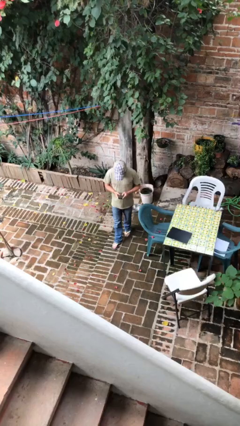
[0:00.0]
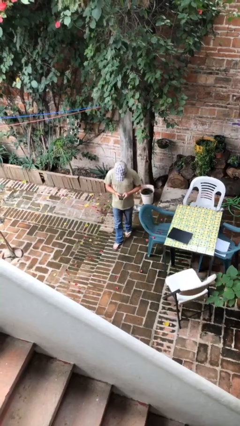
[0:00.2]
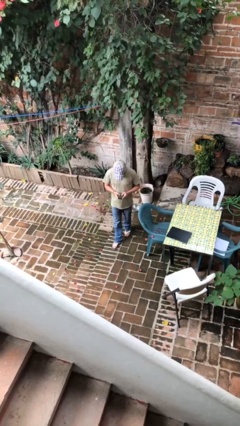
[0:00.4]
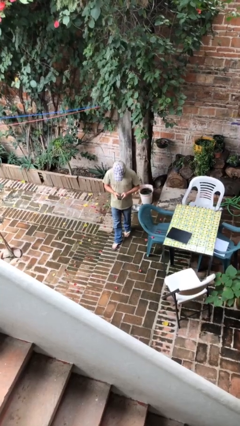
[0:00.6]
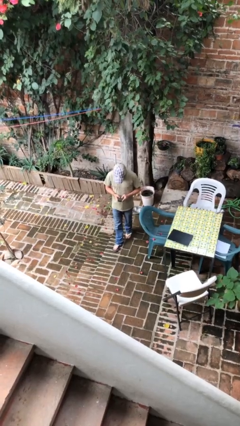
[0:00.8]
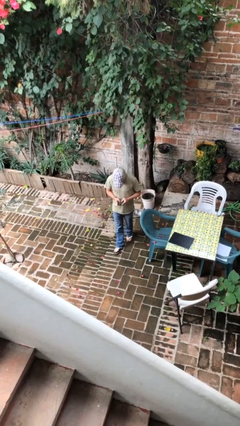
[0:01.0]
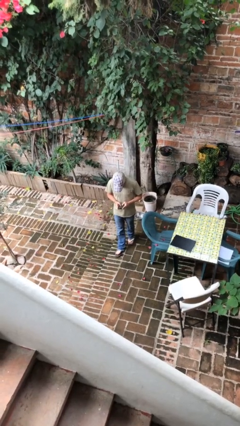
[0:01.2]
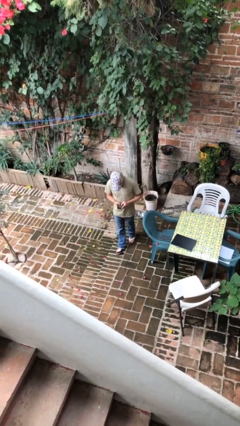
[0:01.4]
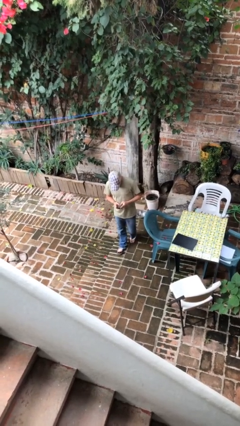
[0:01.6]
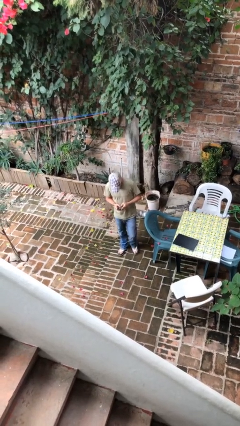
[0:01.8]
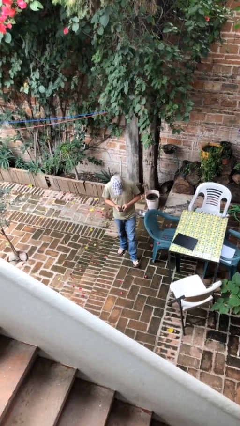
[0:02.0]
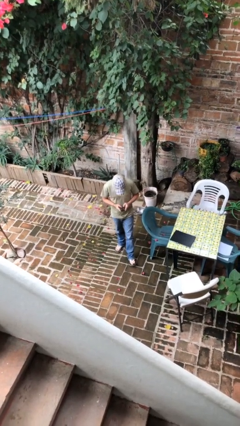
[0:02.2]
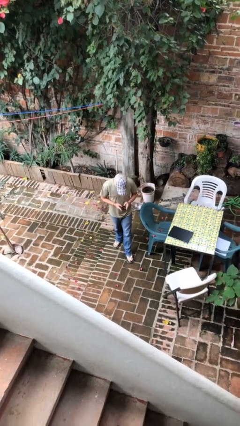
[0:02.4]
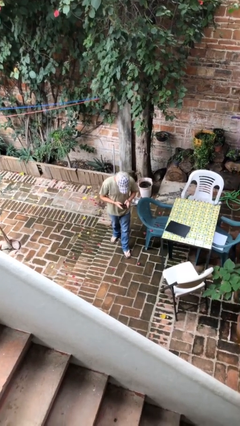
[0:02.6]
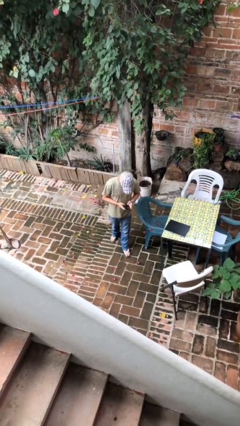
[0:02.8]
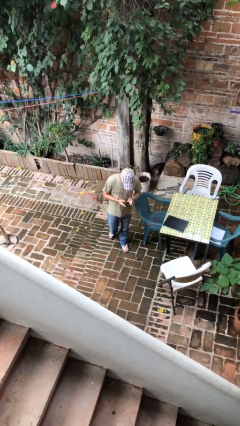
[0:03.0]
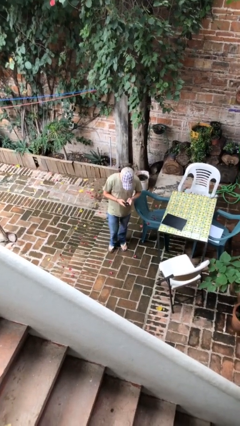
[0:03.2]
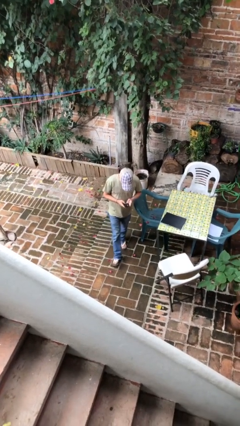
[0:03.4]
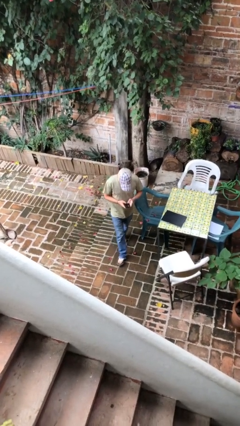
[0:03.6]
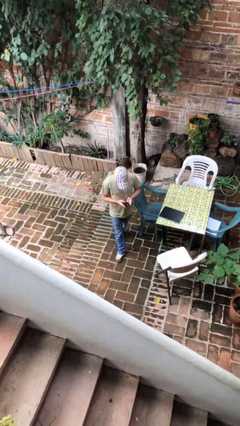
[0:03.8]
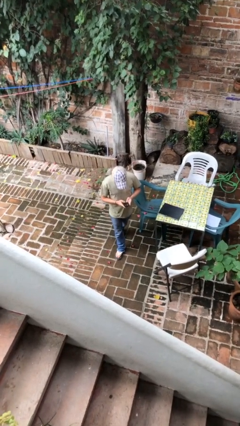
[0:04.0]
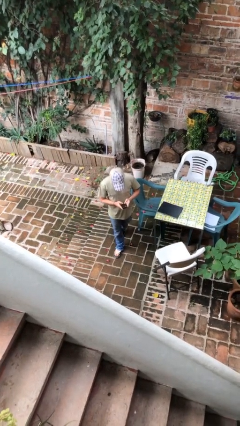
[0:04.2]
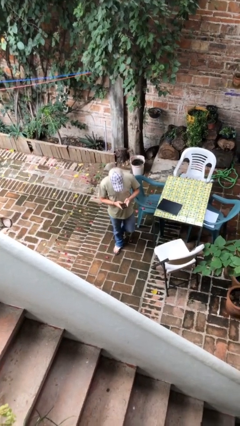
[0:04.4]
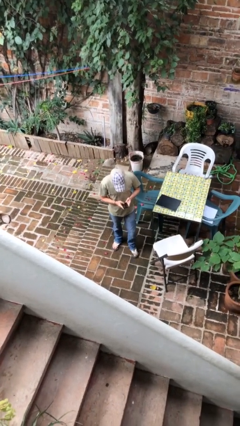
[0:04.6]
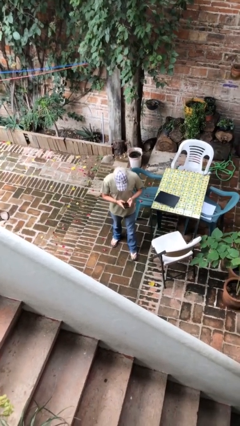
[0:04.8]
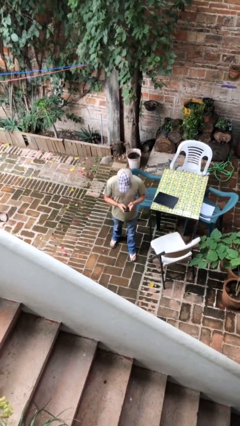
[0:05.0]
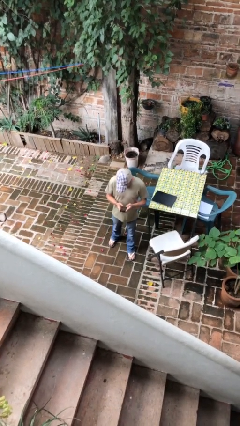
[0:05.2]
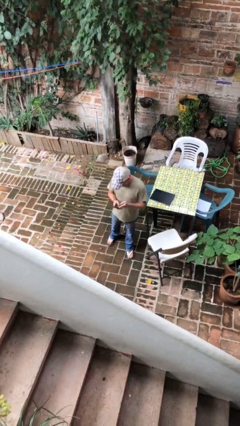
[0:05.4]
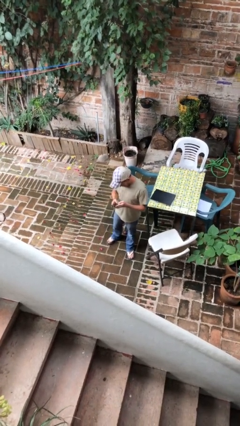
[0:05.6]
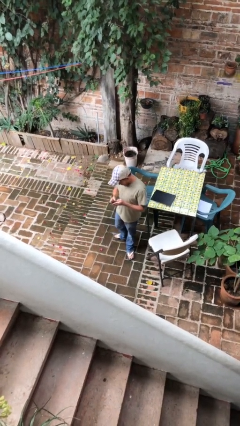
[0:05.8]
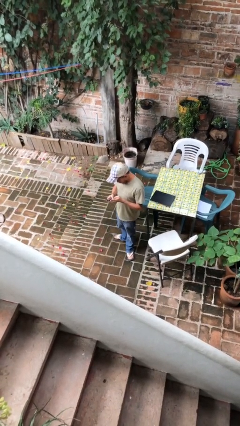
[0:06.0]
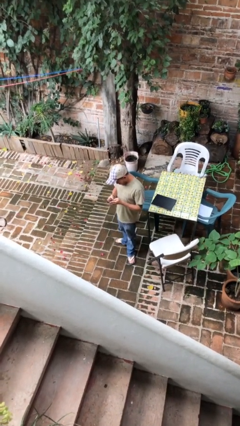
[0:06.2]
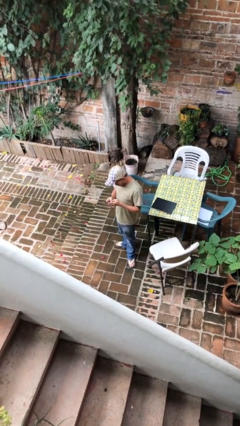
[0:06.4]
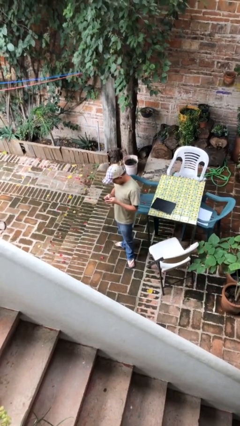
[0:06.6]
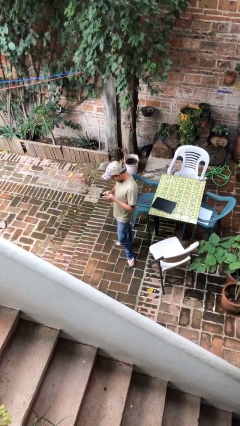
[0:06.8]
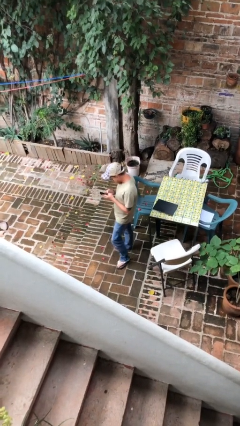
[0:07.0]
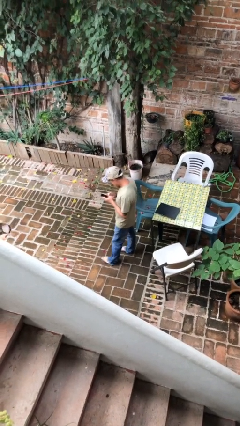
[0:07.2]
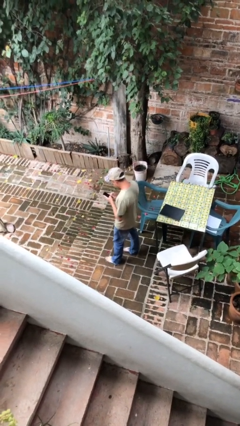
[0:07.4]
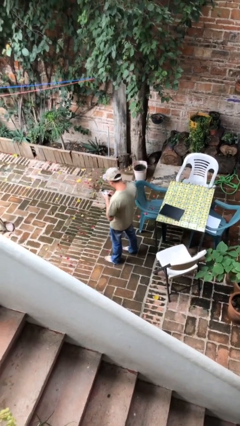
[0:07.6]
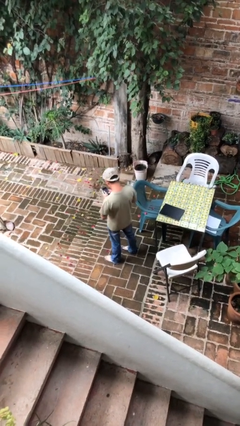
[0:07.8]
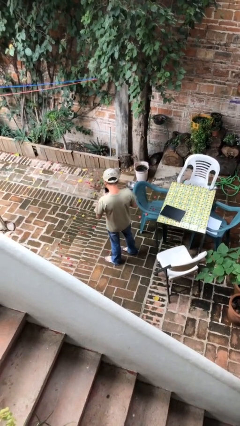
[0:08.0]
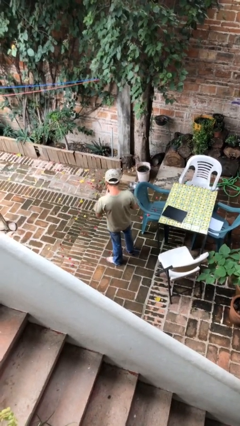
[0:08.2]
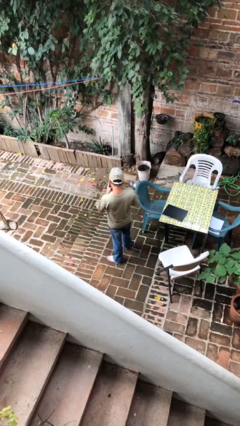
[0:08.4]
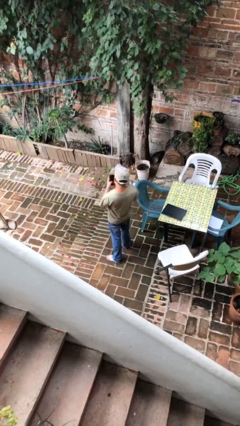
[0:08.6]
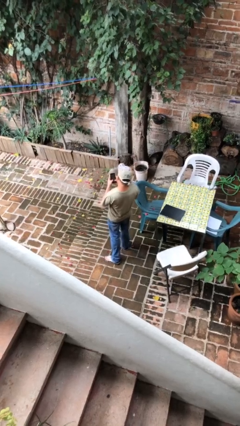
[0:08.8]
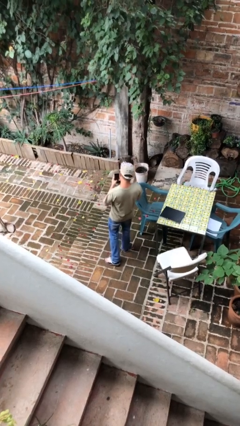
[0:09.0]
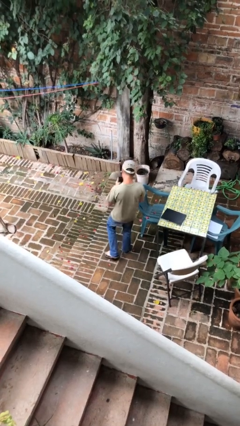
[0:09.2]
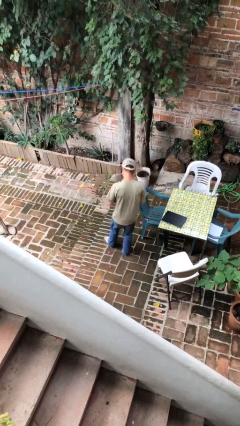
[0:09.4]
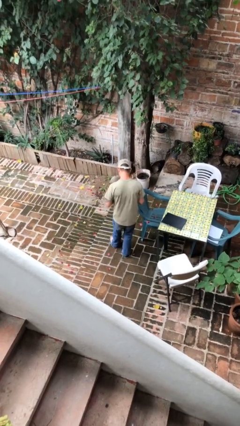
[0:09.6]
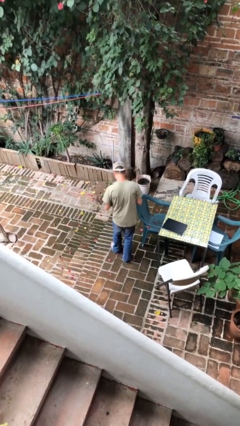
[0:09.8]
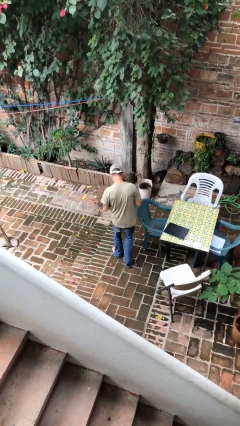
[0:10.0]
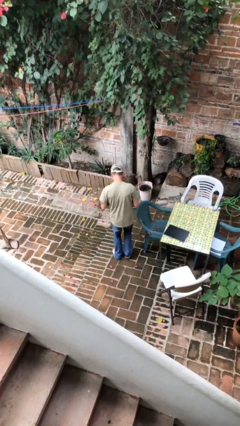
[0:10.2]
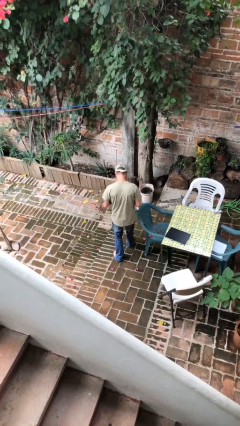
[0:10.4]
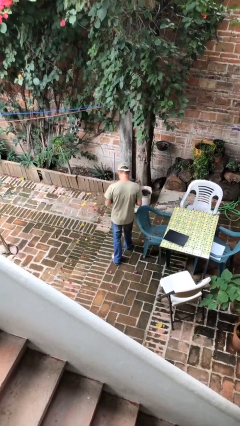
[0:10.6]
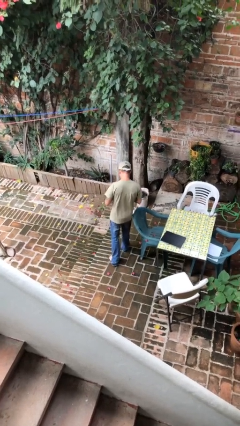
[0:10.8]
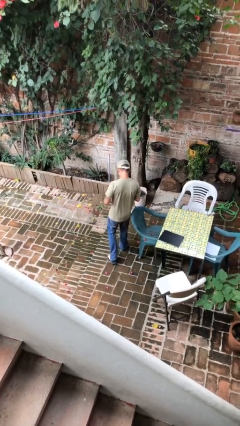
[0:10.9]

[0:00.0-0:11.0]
person texts on phone

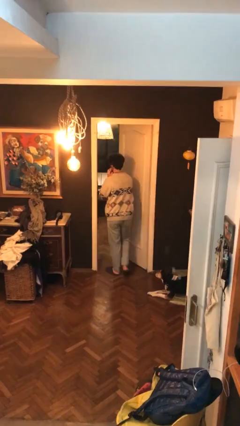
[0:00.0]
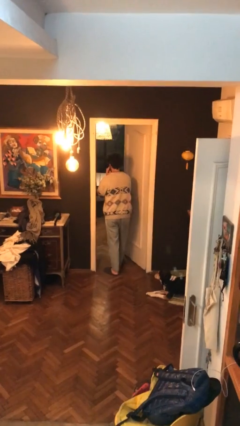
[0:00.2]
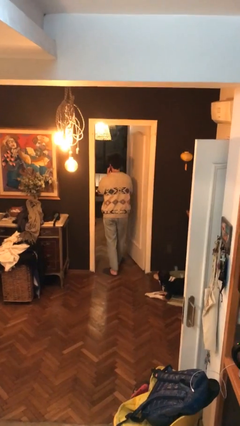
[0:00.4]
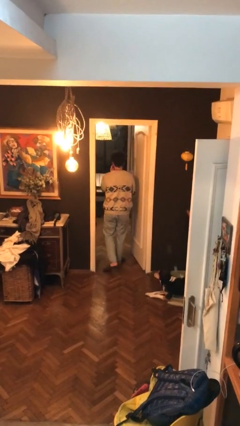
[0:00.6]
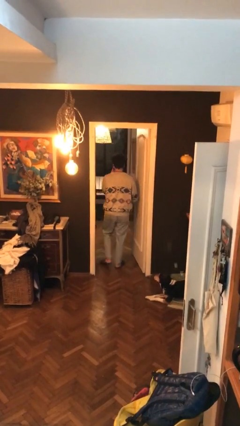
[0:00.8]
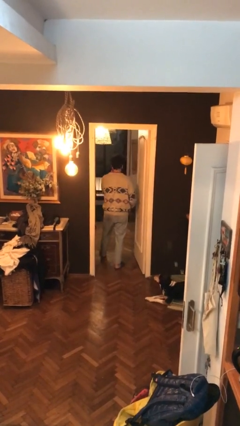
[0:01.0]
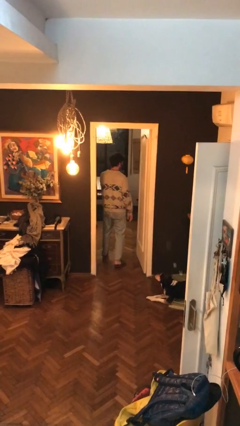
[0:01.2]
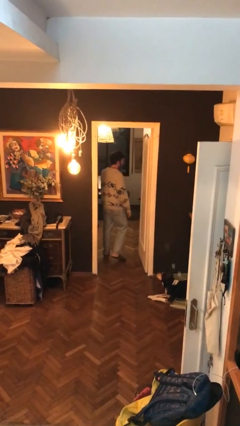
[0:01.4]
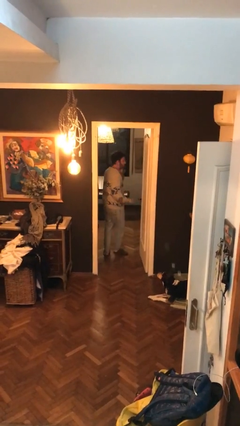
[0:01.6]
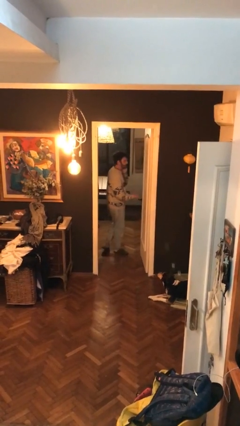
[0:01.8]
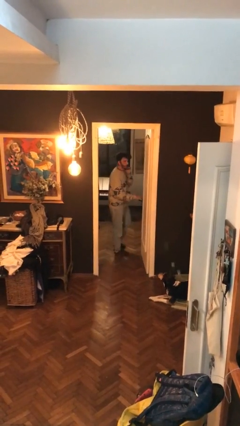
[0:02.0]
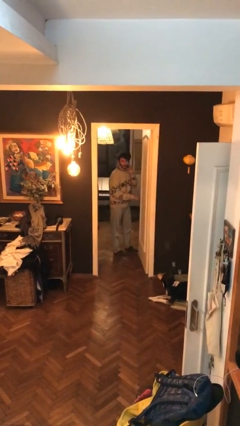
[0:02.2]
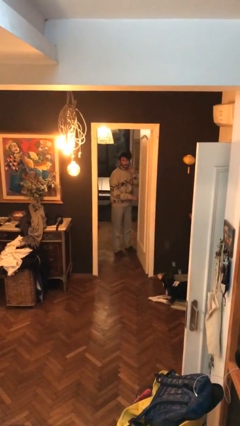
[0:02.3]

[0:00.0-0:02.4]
person exits scene through structure

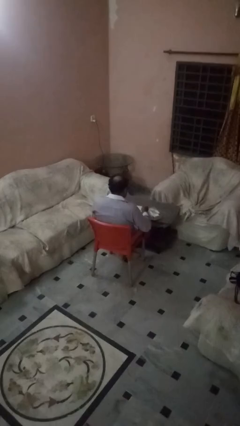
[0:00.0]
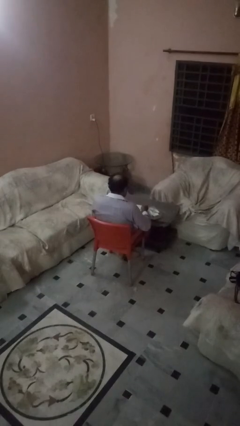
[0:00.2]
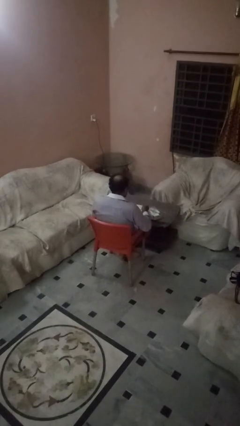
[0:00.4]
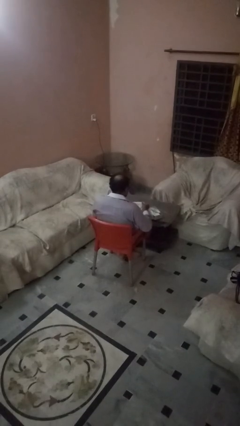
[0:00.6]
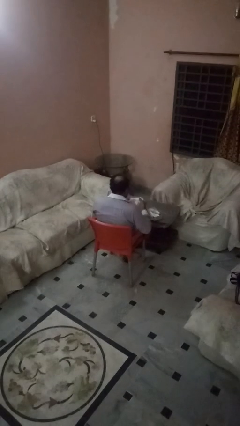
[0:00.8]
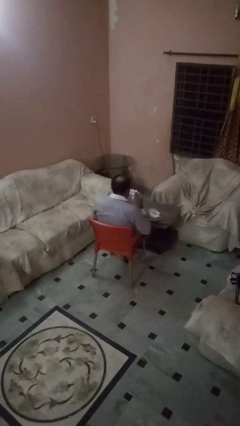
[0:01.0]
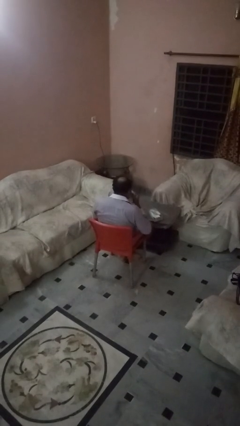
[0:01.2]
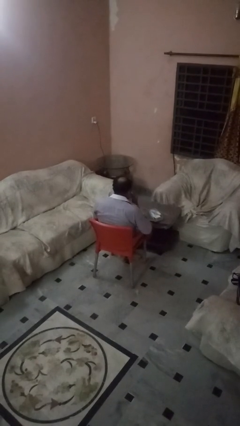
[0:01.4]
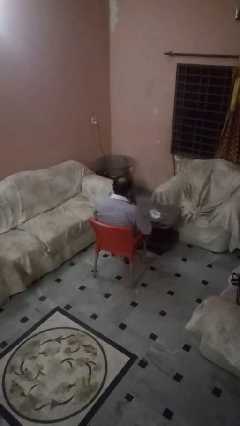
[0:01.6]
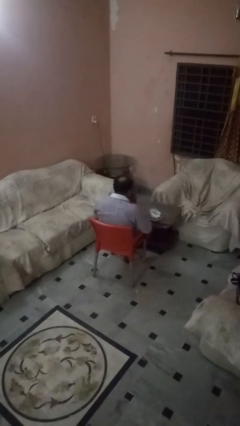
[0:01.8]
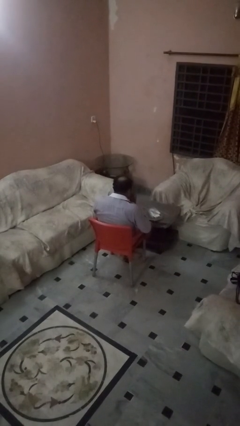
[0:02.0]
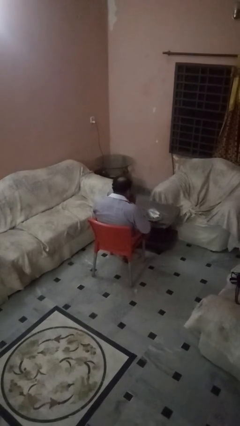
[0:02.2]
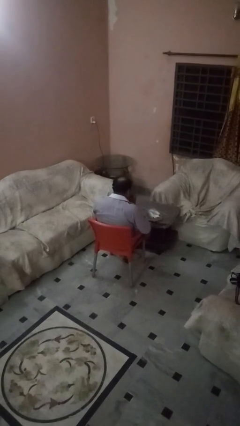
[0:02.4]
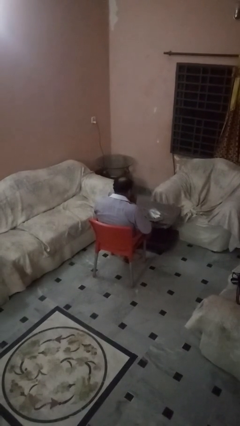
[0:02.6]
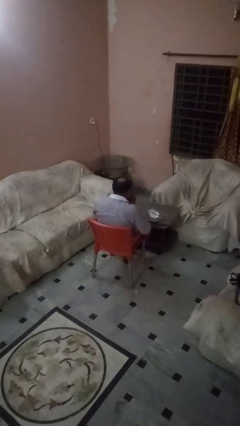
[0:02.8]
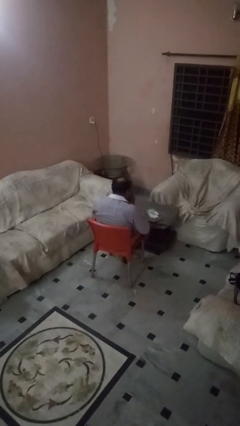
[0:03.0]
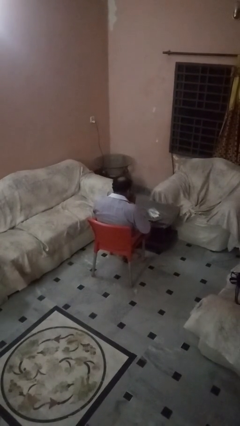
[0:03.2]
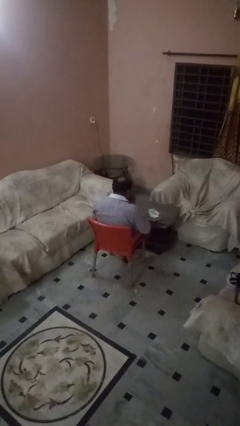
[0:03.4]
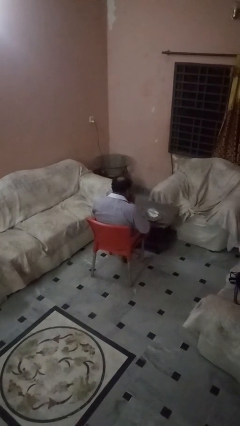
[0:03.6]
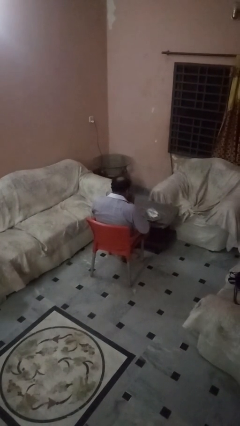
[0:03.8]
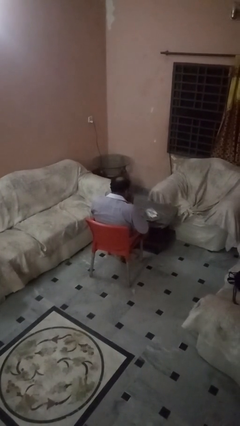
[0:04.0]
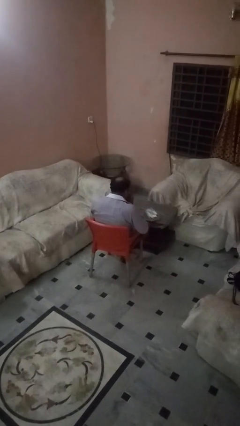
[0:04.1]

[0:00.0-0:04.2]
person blows nose

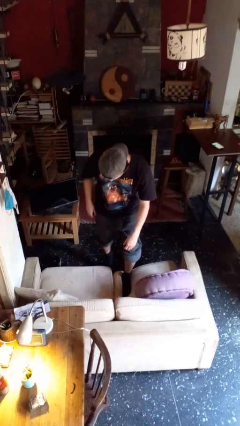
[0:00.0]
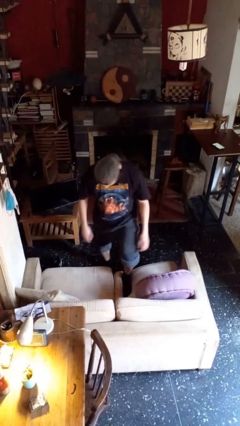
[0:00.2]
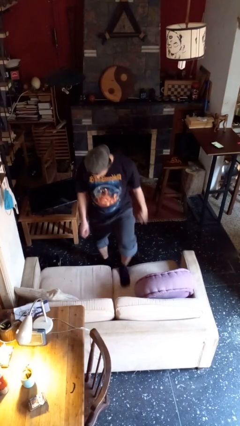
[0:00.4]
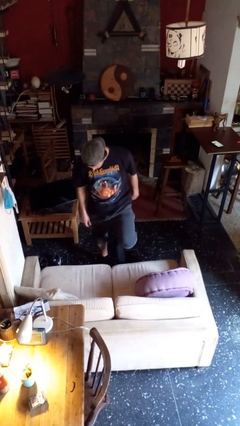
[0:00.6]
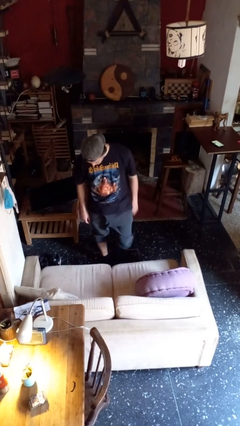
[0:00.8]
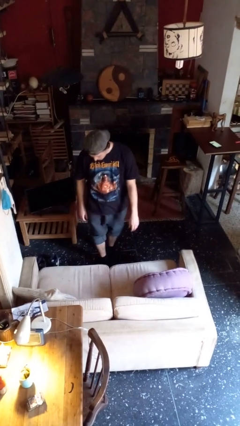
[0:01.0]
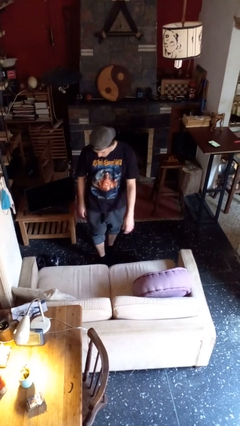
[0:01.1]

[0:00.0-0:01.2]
person climbs off couch
